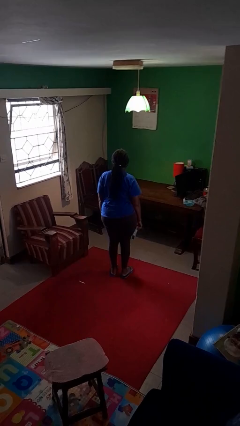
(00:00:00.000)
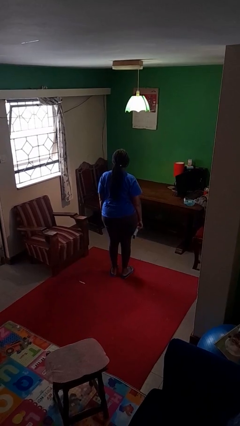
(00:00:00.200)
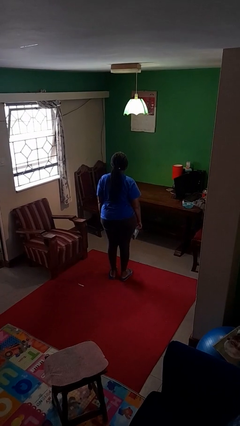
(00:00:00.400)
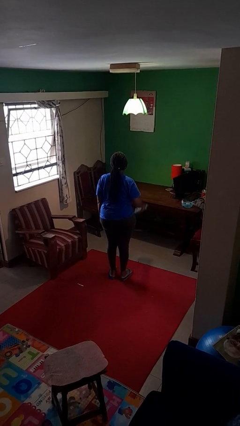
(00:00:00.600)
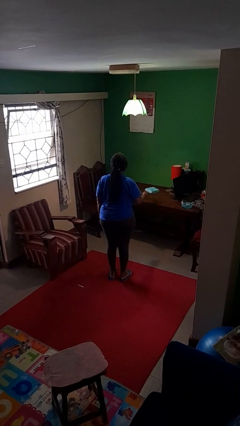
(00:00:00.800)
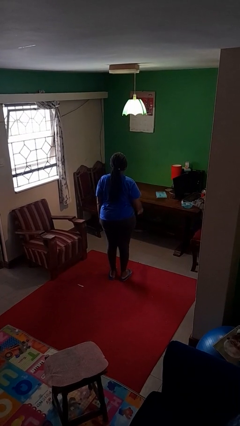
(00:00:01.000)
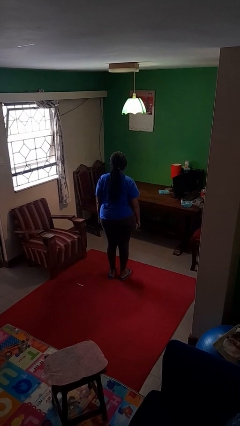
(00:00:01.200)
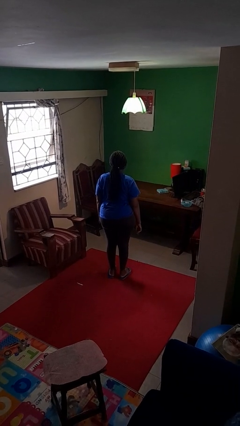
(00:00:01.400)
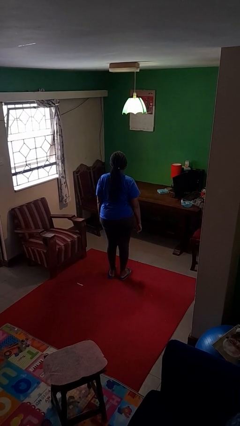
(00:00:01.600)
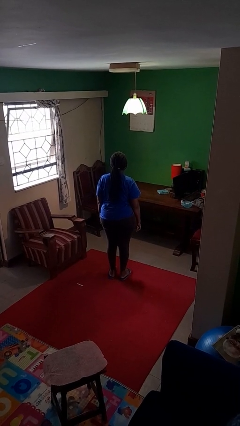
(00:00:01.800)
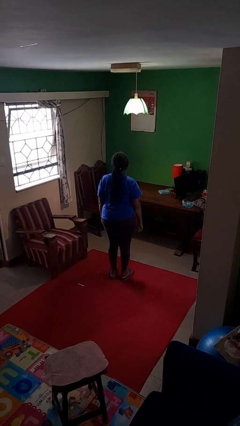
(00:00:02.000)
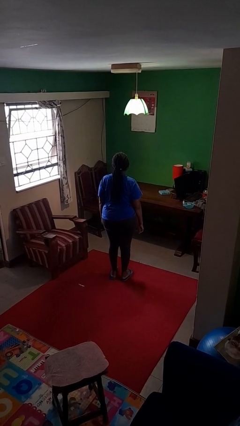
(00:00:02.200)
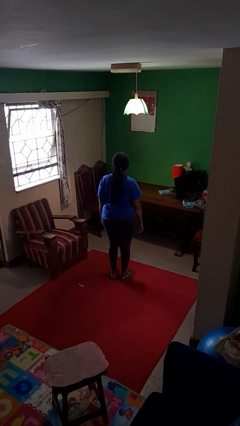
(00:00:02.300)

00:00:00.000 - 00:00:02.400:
person throws object on table

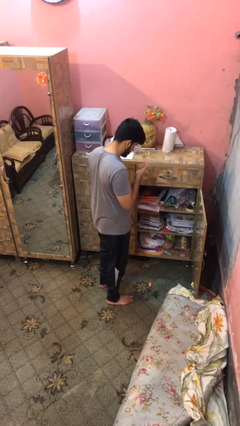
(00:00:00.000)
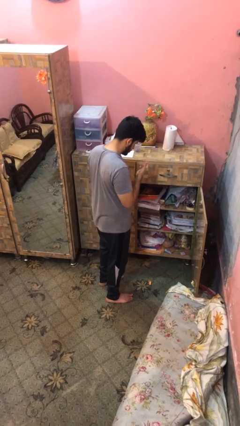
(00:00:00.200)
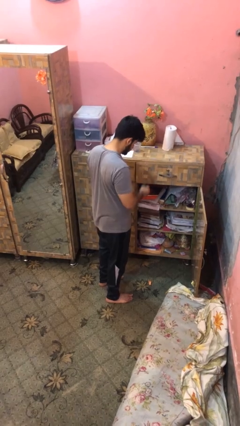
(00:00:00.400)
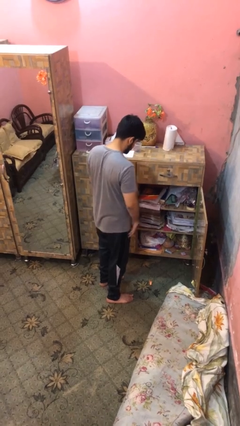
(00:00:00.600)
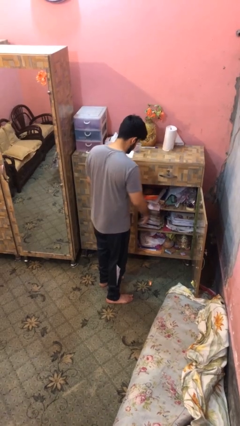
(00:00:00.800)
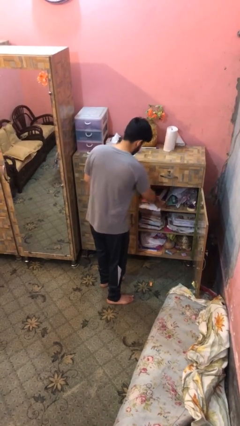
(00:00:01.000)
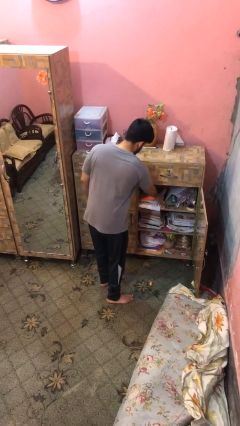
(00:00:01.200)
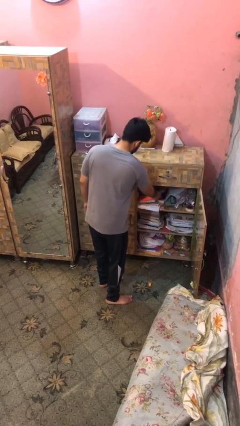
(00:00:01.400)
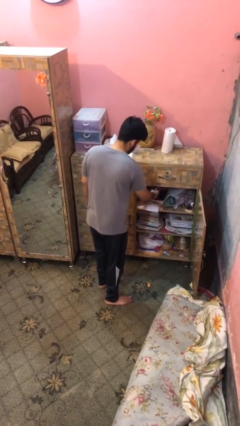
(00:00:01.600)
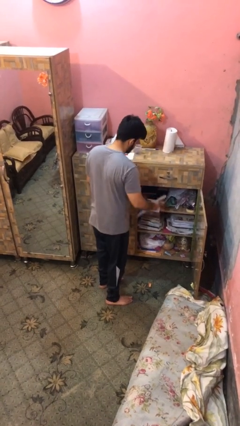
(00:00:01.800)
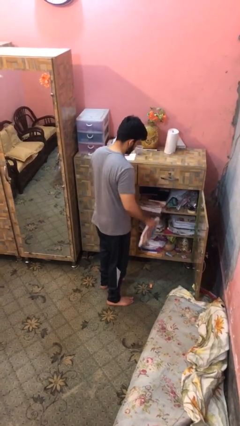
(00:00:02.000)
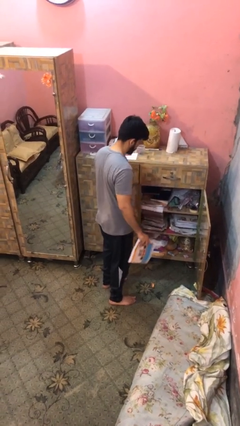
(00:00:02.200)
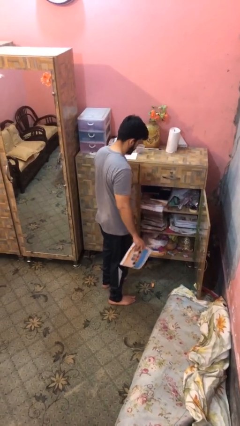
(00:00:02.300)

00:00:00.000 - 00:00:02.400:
person picks up object from cabinet

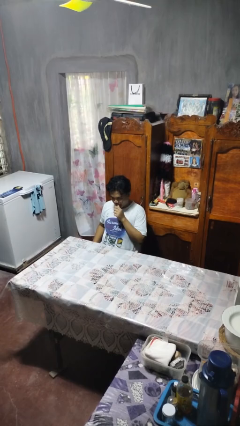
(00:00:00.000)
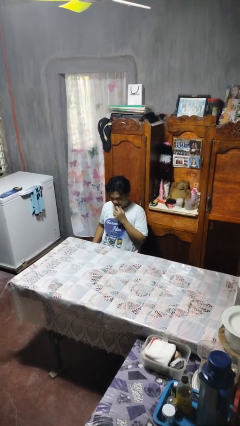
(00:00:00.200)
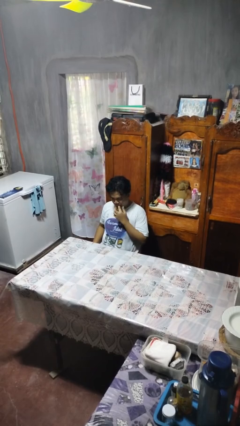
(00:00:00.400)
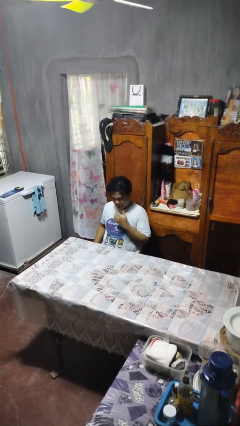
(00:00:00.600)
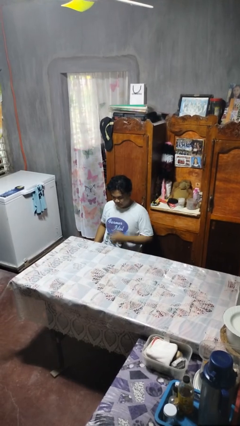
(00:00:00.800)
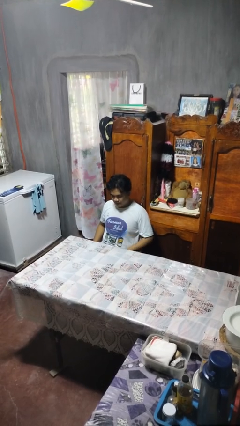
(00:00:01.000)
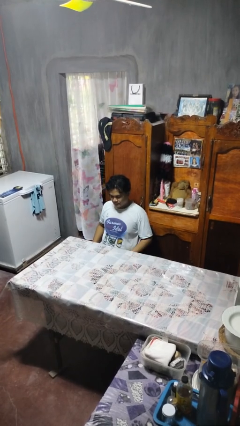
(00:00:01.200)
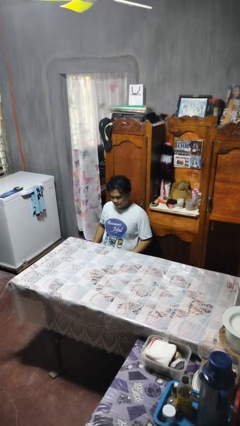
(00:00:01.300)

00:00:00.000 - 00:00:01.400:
person licks fingers

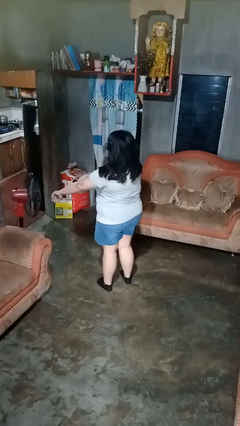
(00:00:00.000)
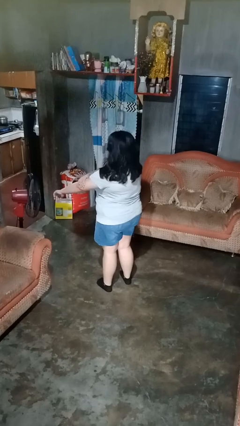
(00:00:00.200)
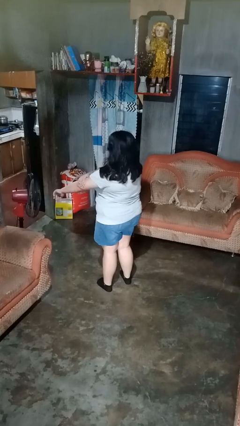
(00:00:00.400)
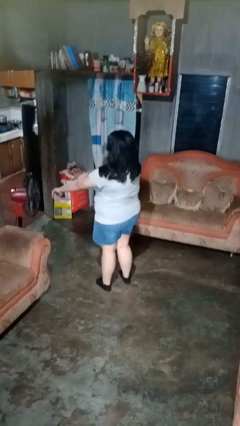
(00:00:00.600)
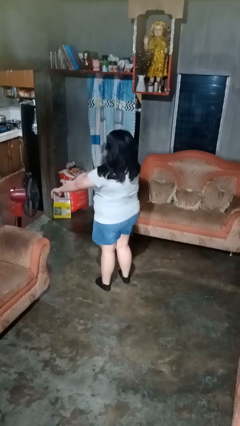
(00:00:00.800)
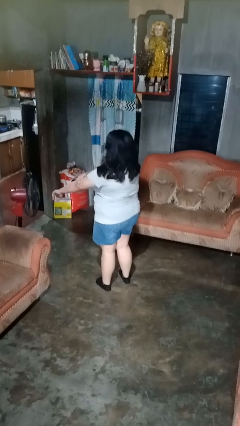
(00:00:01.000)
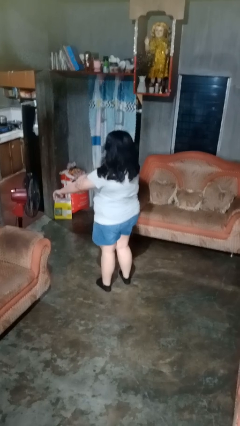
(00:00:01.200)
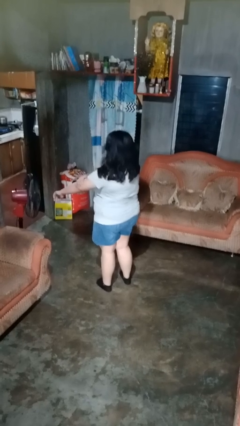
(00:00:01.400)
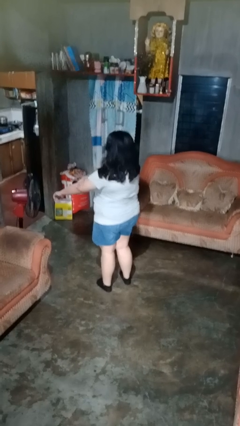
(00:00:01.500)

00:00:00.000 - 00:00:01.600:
person swats bug

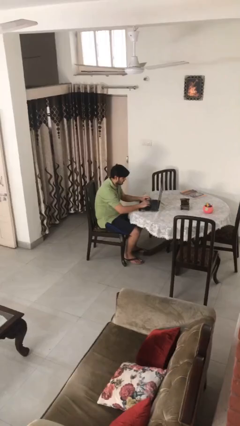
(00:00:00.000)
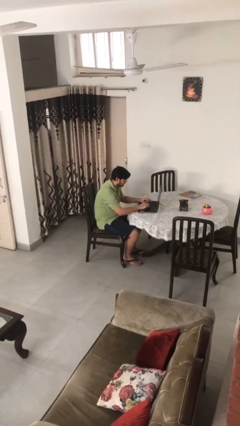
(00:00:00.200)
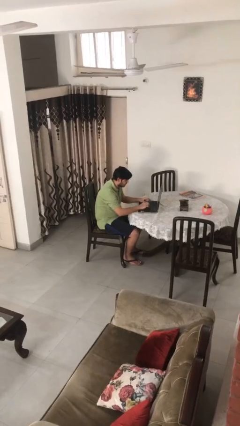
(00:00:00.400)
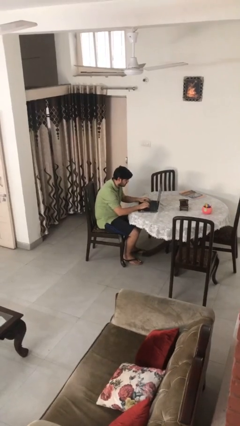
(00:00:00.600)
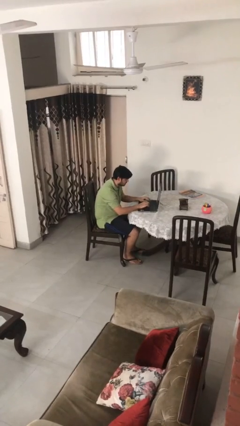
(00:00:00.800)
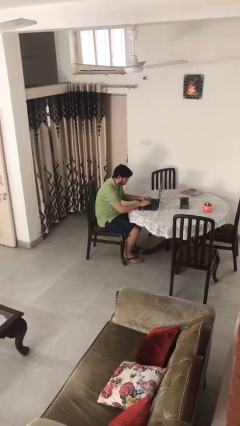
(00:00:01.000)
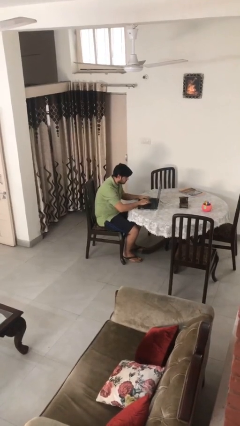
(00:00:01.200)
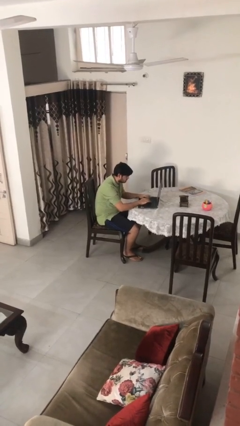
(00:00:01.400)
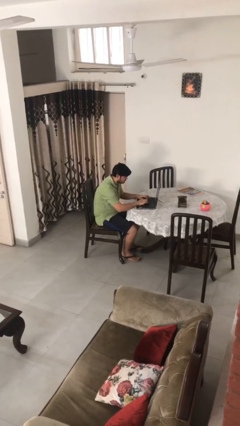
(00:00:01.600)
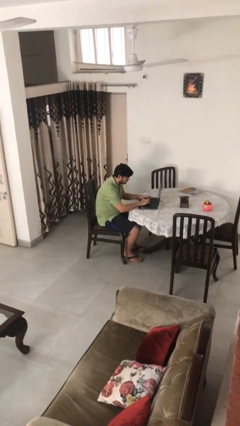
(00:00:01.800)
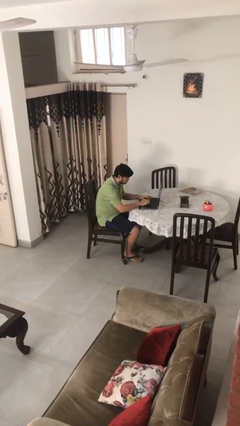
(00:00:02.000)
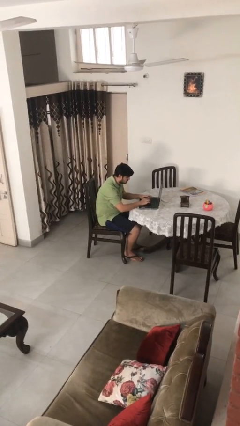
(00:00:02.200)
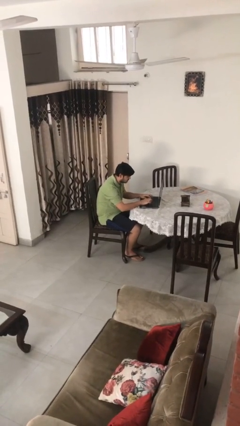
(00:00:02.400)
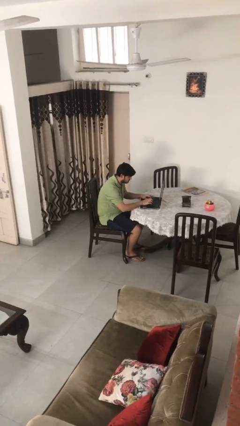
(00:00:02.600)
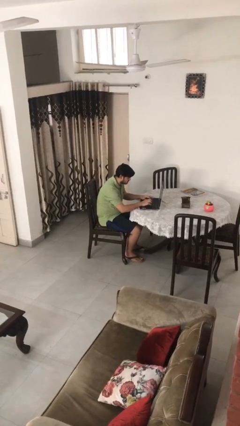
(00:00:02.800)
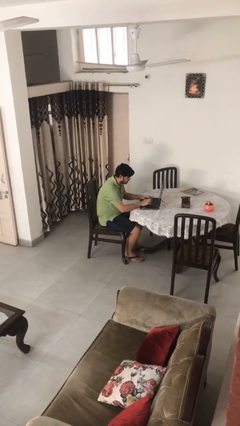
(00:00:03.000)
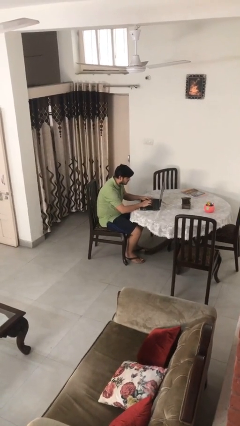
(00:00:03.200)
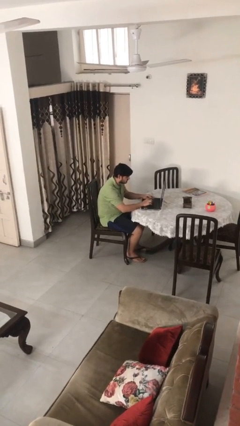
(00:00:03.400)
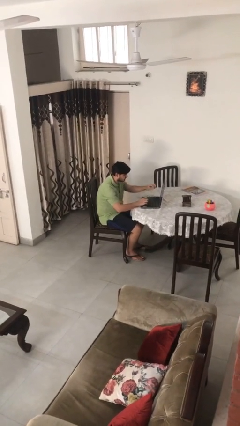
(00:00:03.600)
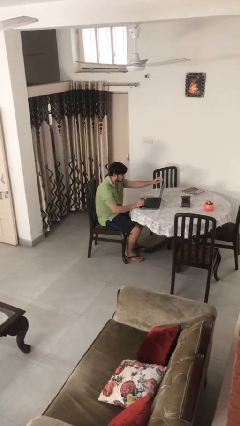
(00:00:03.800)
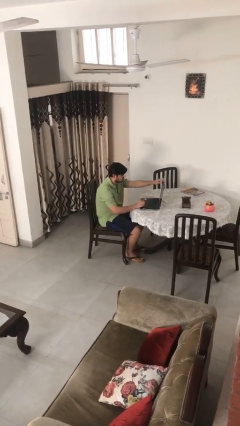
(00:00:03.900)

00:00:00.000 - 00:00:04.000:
person interacts with laptop

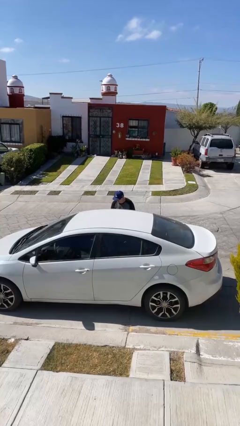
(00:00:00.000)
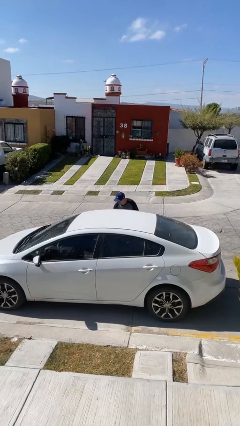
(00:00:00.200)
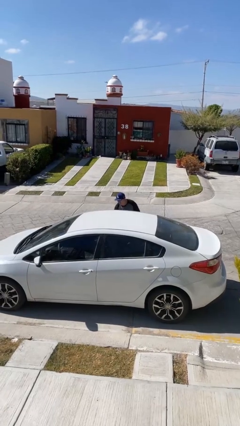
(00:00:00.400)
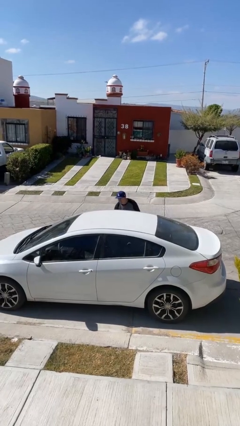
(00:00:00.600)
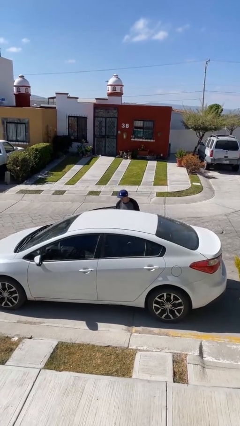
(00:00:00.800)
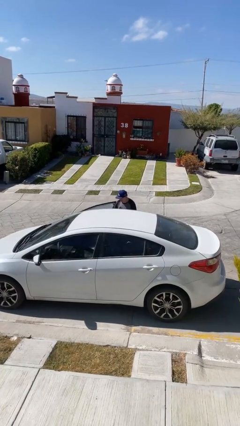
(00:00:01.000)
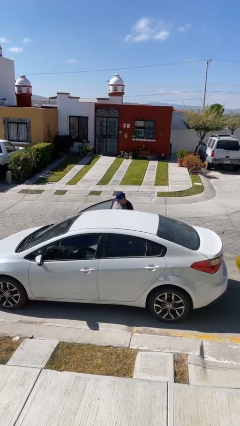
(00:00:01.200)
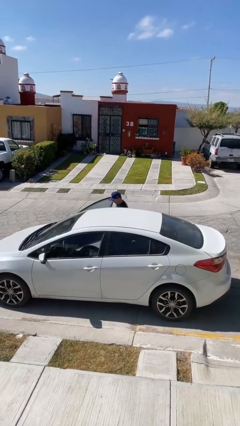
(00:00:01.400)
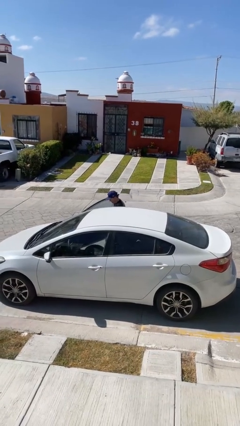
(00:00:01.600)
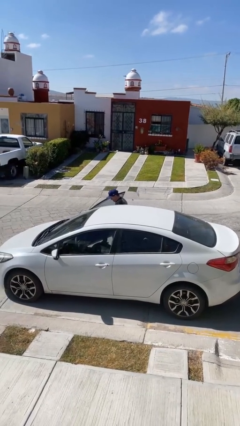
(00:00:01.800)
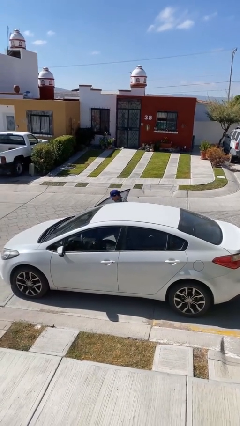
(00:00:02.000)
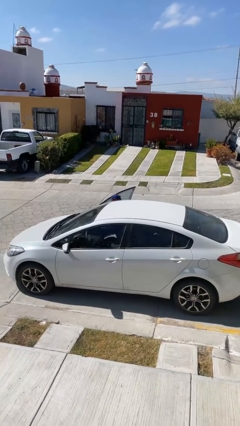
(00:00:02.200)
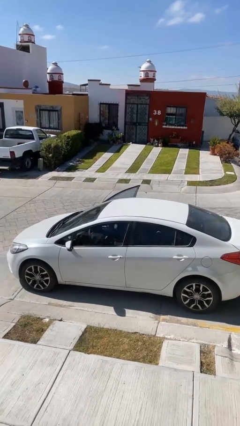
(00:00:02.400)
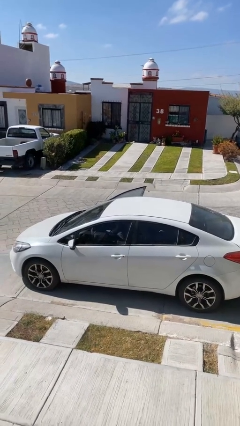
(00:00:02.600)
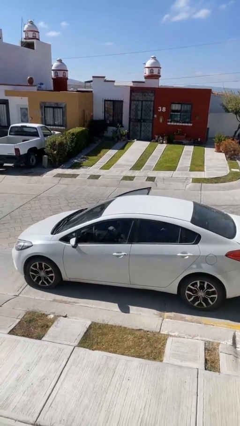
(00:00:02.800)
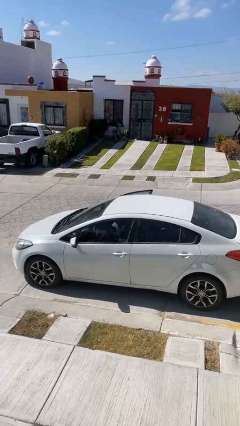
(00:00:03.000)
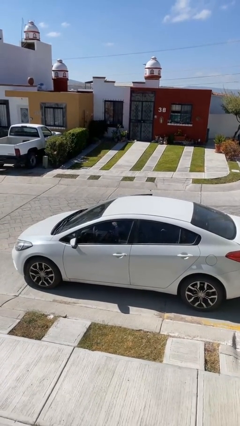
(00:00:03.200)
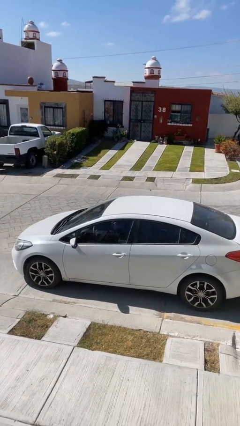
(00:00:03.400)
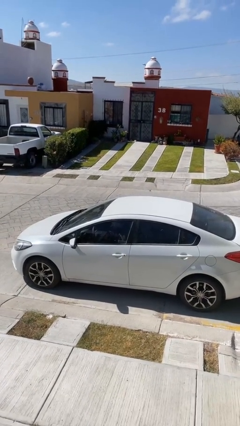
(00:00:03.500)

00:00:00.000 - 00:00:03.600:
car picks up person

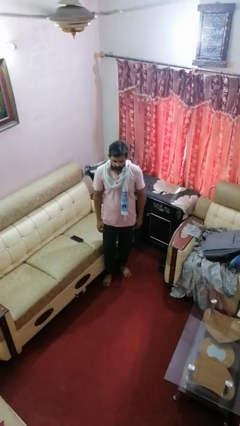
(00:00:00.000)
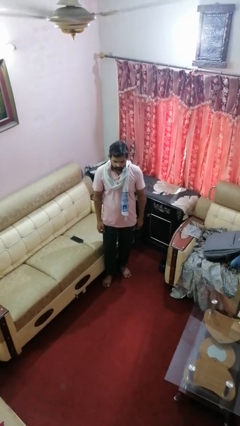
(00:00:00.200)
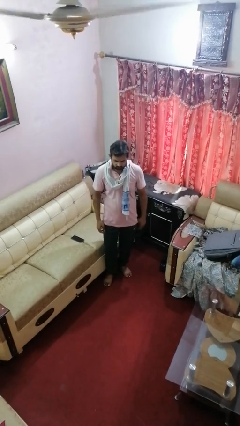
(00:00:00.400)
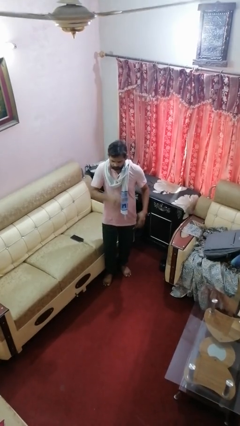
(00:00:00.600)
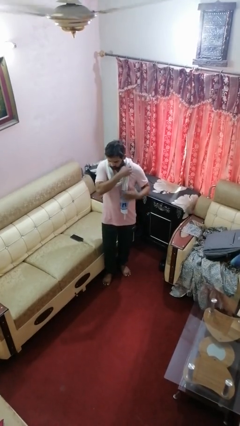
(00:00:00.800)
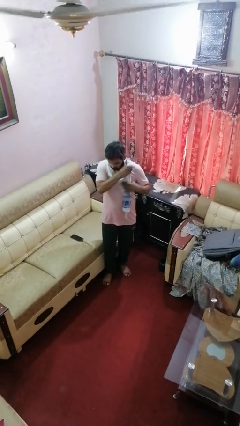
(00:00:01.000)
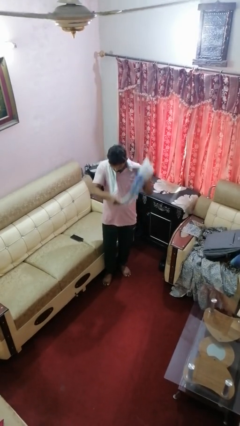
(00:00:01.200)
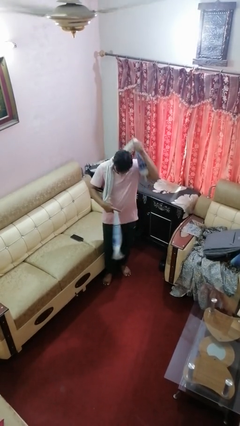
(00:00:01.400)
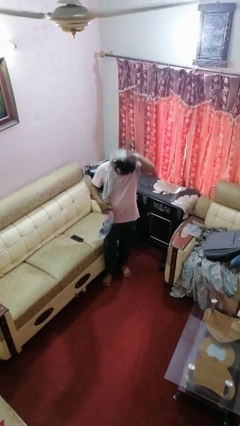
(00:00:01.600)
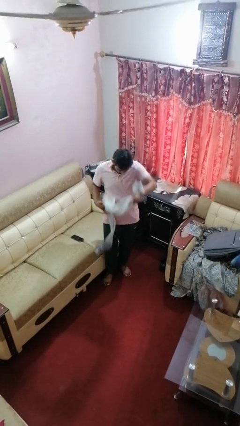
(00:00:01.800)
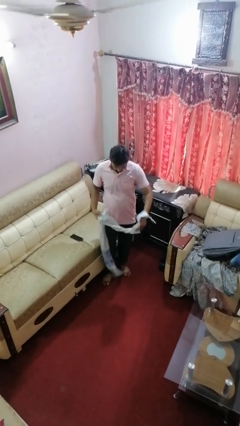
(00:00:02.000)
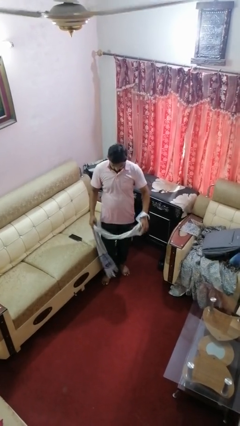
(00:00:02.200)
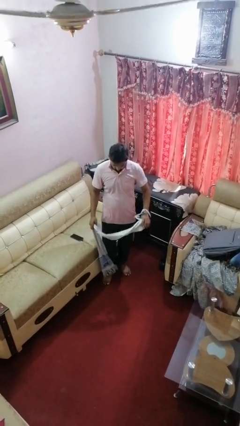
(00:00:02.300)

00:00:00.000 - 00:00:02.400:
person takes off scarf
